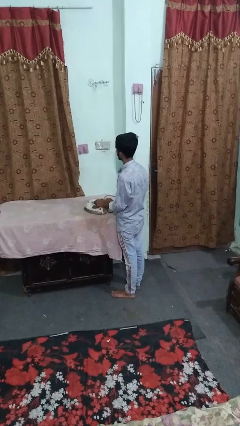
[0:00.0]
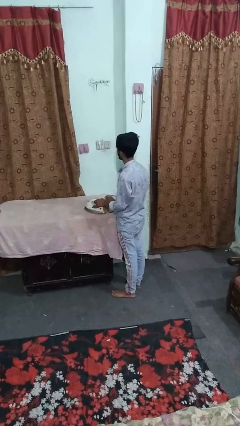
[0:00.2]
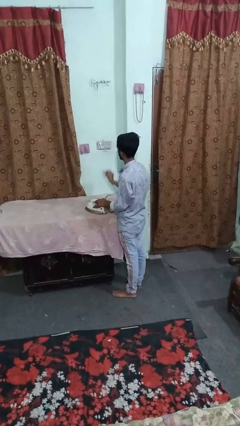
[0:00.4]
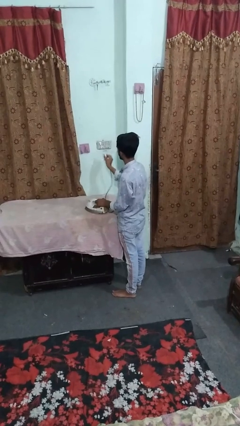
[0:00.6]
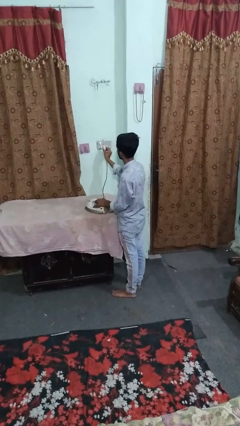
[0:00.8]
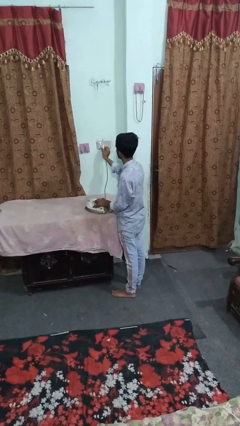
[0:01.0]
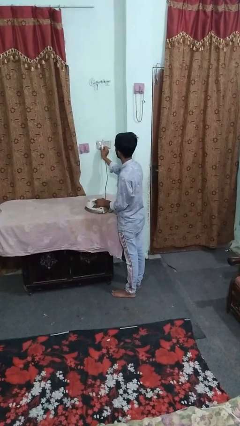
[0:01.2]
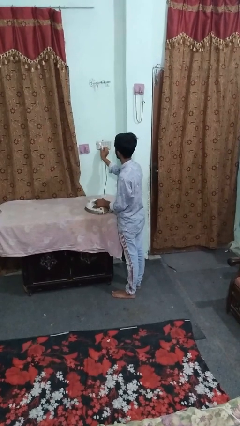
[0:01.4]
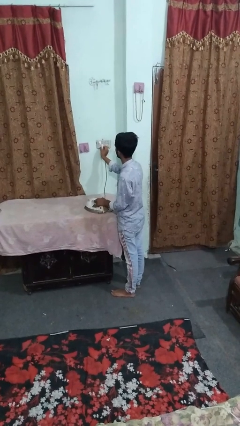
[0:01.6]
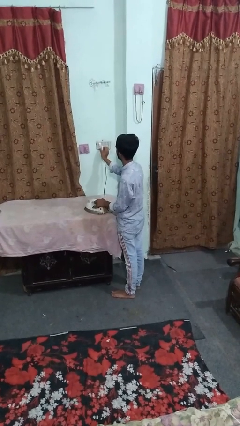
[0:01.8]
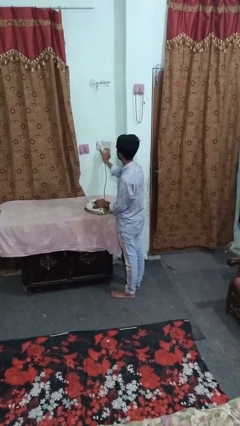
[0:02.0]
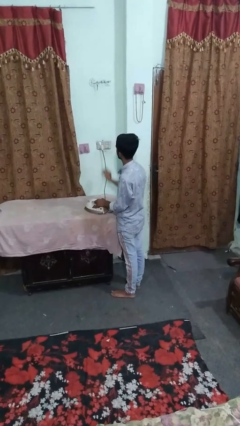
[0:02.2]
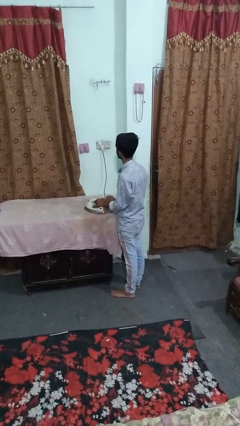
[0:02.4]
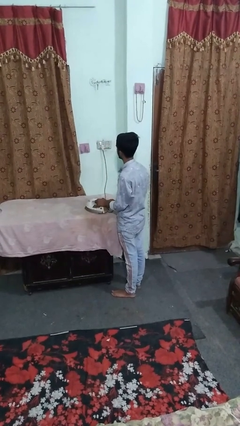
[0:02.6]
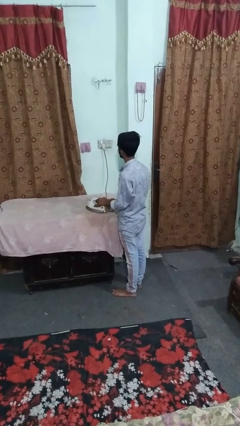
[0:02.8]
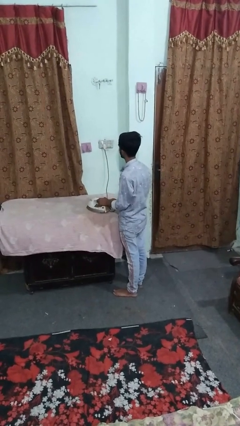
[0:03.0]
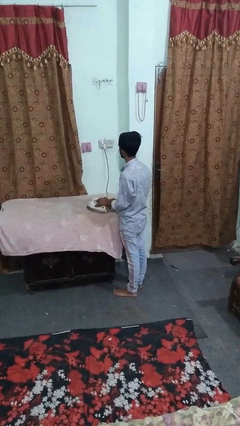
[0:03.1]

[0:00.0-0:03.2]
person plugs into electrical socket

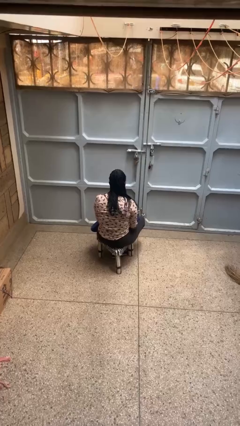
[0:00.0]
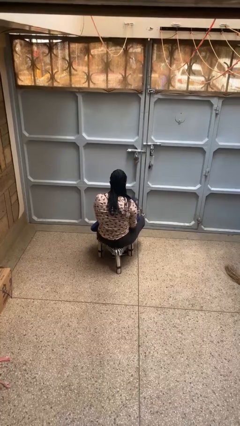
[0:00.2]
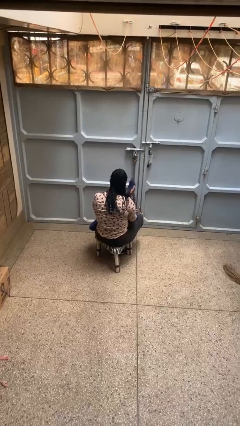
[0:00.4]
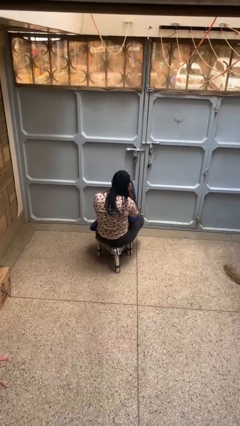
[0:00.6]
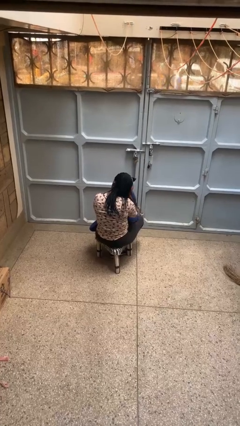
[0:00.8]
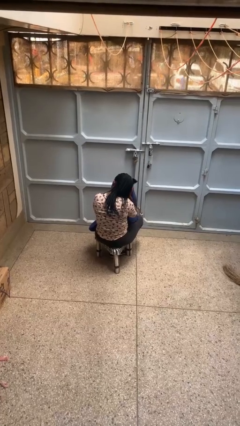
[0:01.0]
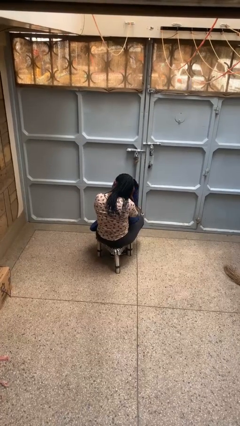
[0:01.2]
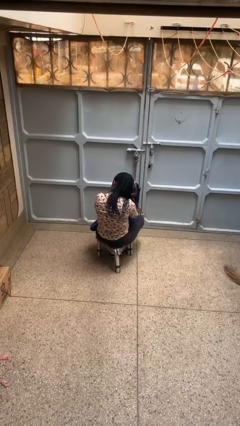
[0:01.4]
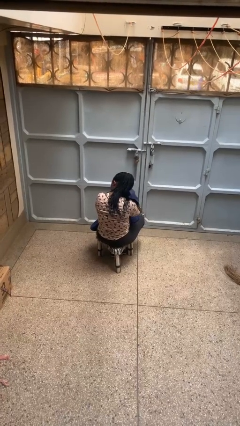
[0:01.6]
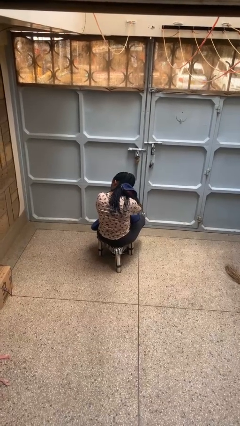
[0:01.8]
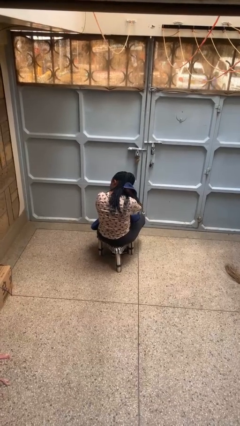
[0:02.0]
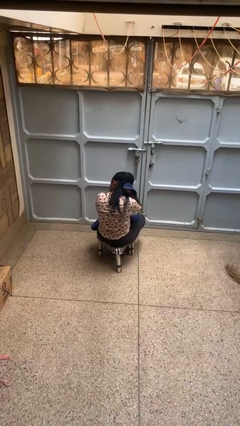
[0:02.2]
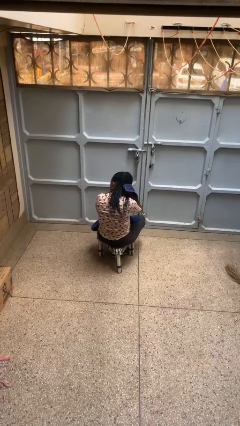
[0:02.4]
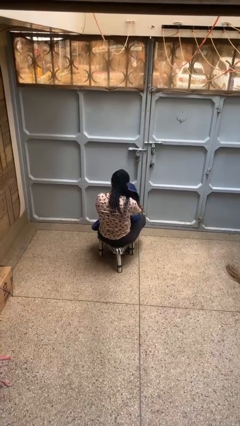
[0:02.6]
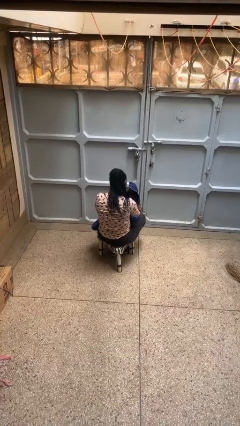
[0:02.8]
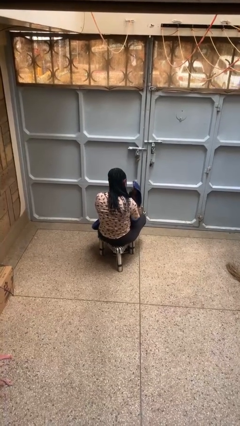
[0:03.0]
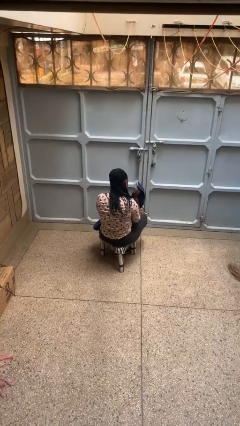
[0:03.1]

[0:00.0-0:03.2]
person dries hair with towel

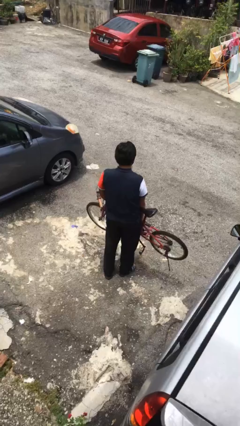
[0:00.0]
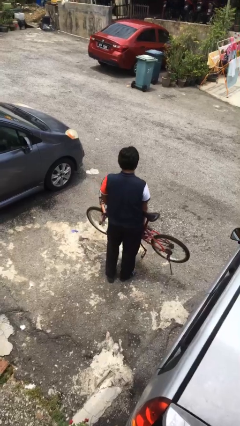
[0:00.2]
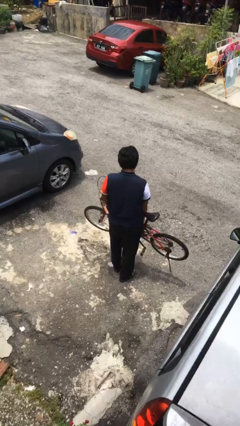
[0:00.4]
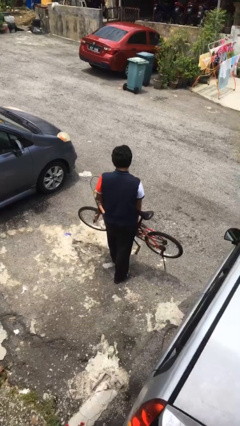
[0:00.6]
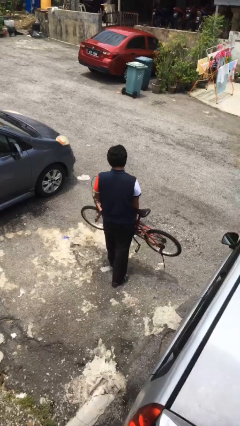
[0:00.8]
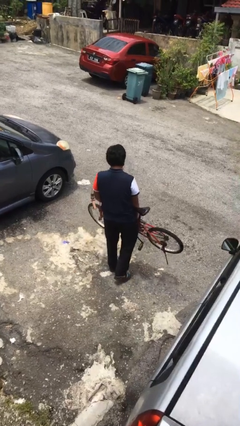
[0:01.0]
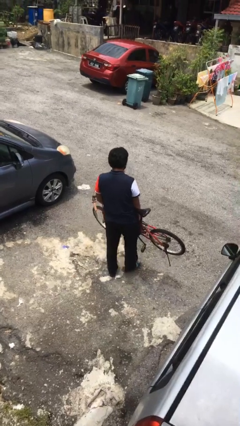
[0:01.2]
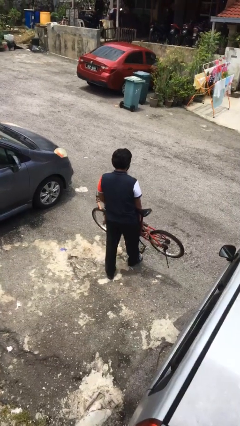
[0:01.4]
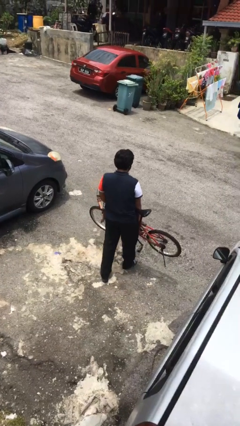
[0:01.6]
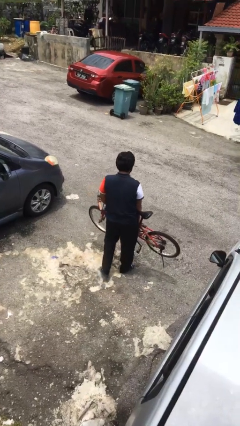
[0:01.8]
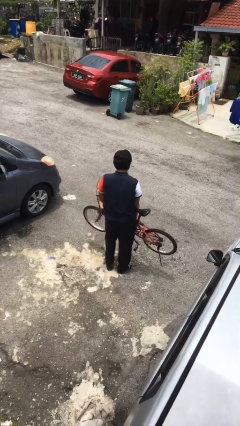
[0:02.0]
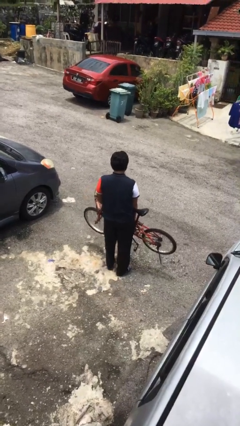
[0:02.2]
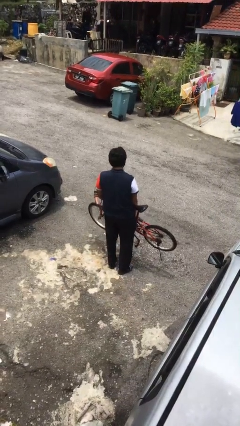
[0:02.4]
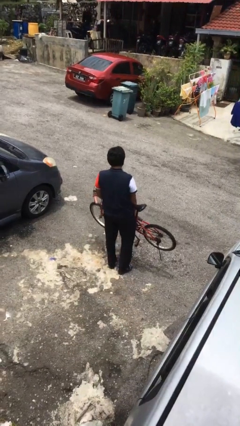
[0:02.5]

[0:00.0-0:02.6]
person carries bicycle

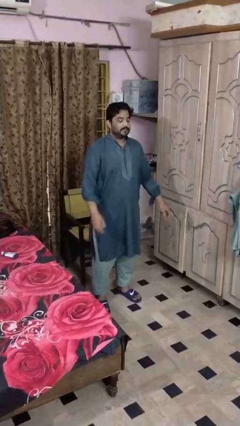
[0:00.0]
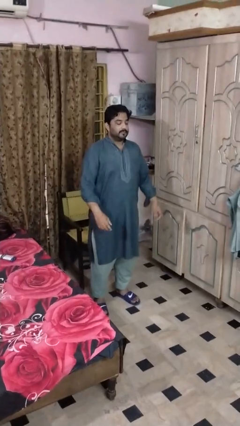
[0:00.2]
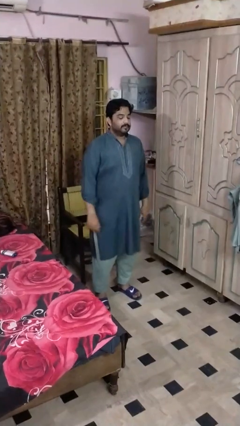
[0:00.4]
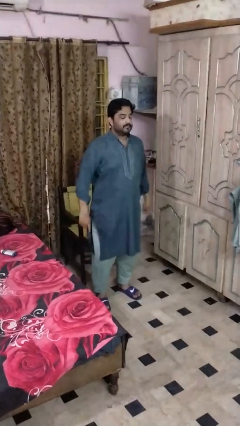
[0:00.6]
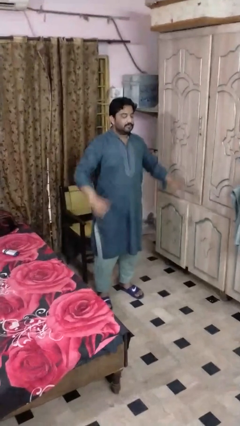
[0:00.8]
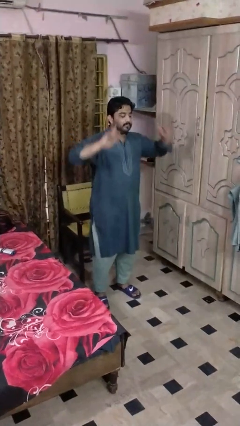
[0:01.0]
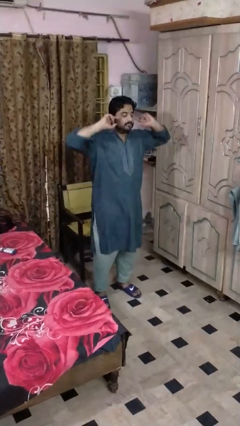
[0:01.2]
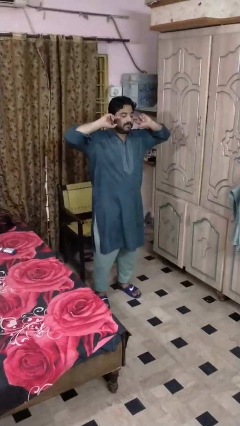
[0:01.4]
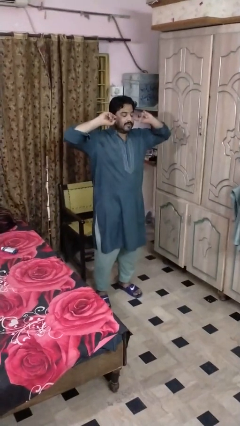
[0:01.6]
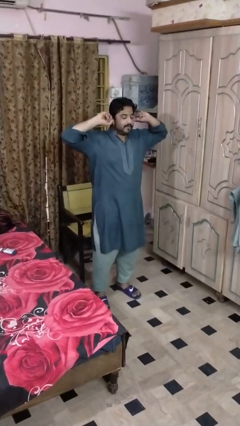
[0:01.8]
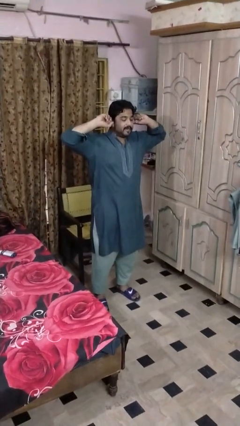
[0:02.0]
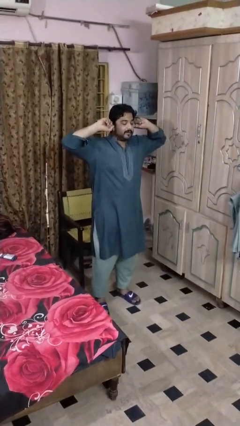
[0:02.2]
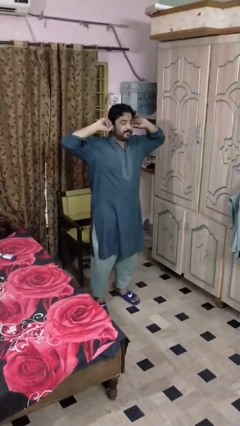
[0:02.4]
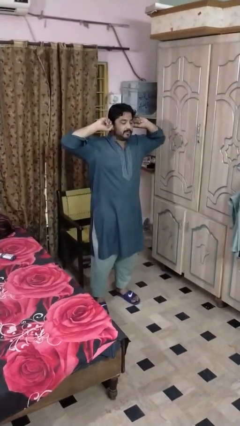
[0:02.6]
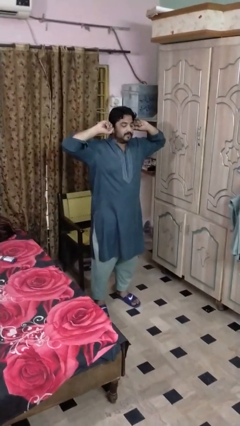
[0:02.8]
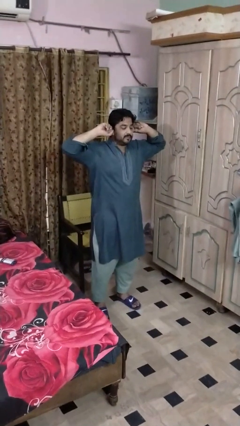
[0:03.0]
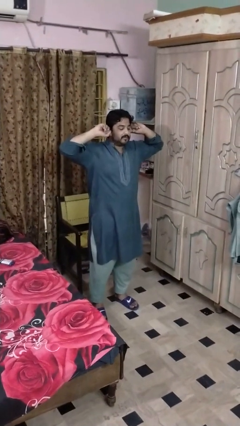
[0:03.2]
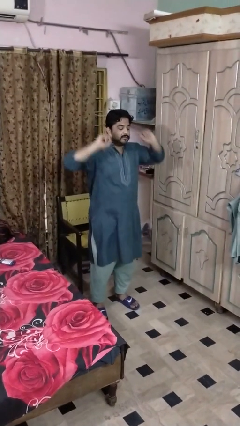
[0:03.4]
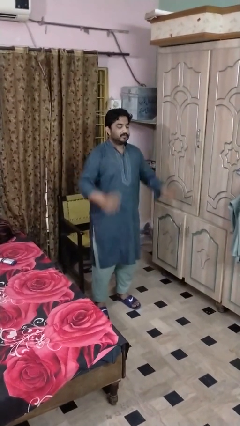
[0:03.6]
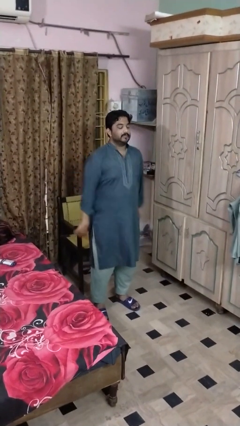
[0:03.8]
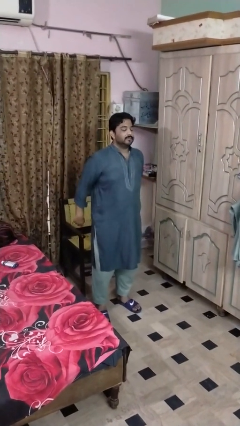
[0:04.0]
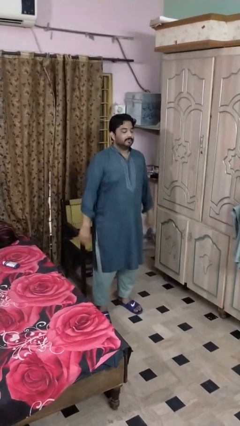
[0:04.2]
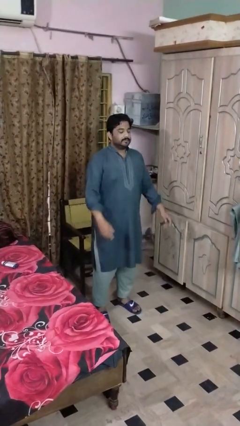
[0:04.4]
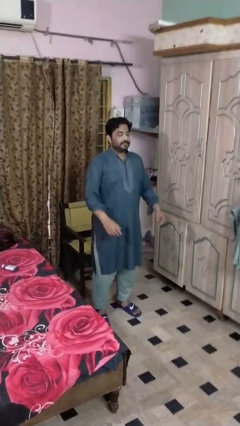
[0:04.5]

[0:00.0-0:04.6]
person puts fingers in ear

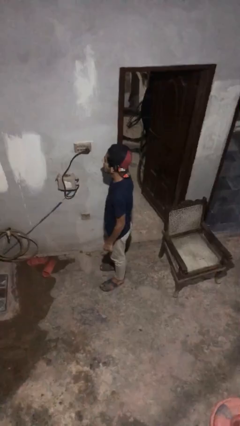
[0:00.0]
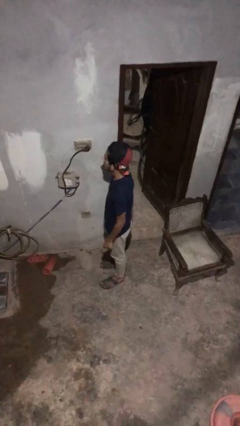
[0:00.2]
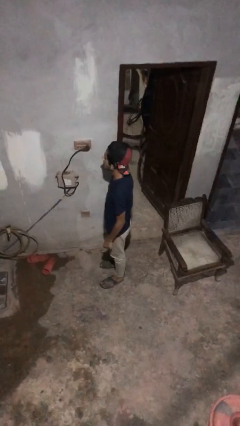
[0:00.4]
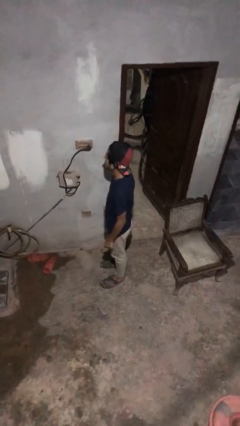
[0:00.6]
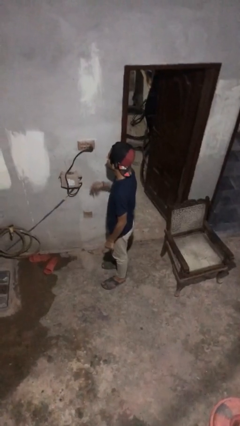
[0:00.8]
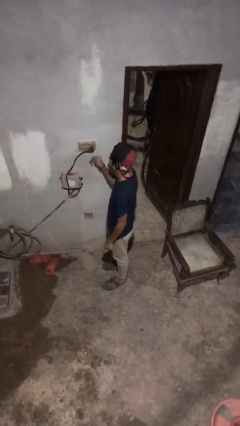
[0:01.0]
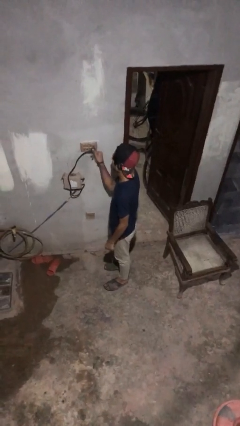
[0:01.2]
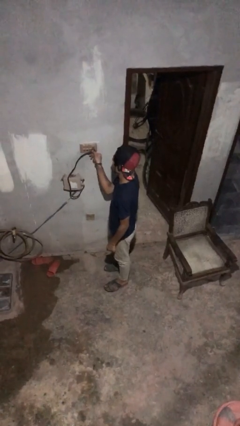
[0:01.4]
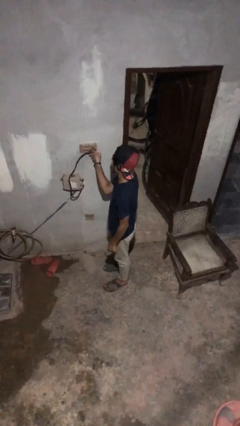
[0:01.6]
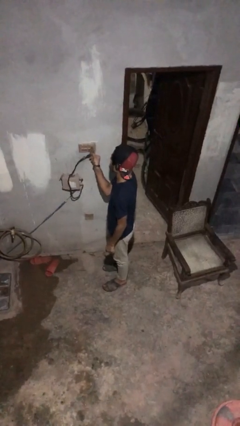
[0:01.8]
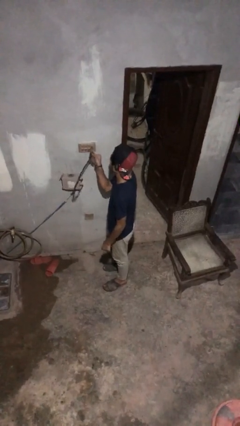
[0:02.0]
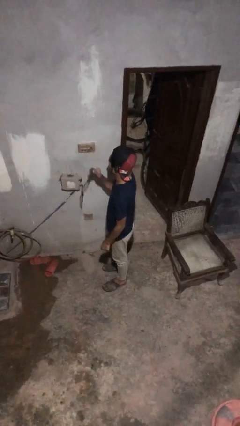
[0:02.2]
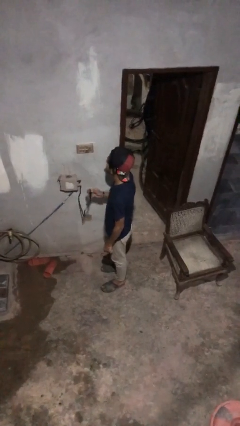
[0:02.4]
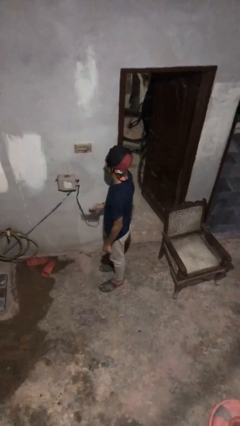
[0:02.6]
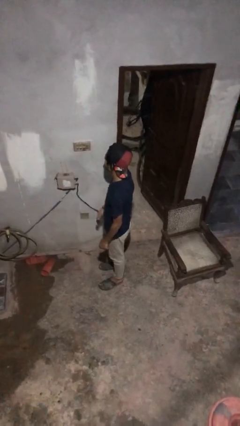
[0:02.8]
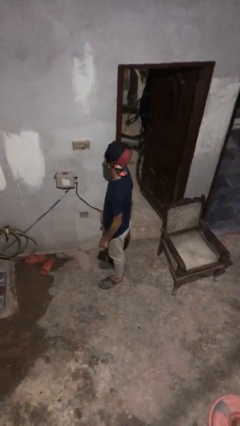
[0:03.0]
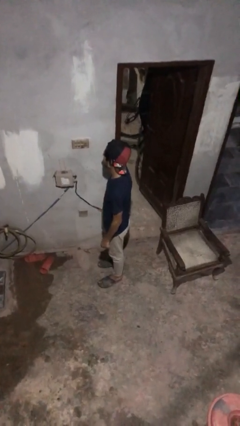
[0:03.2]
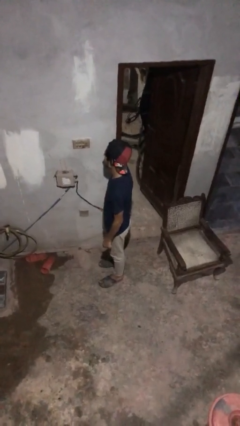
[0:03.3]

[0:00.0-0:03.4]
person unplugs from electrical socket

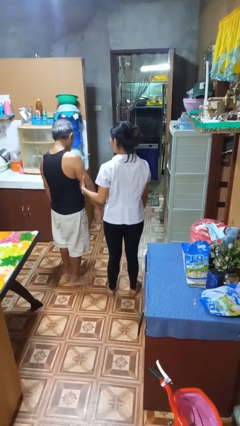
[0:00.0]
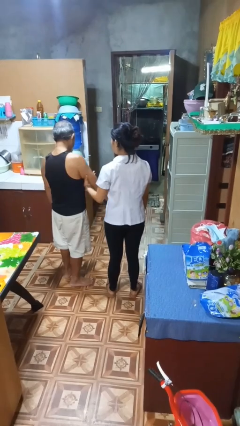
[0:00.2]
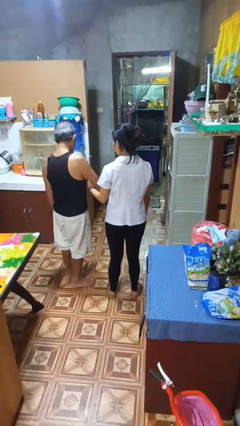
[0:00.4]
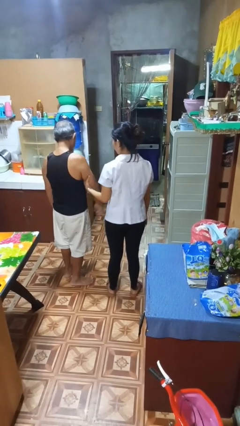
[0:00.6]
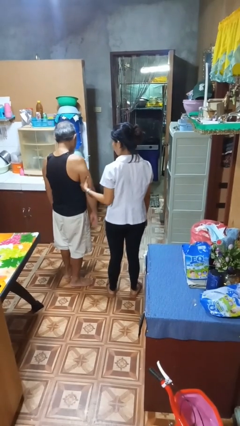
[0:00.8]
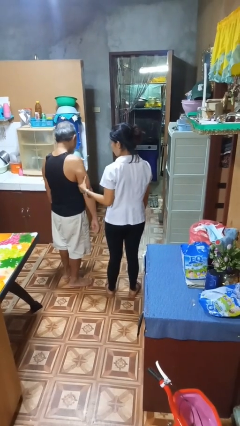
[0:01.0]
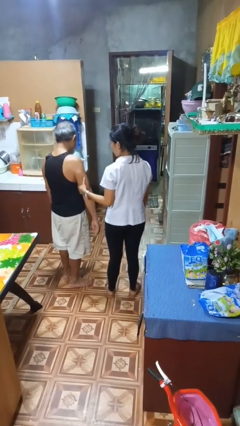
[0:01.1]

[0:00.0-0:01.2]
person grabs person by bicep
